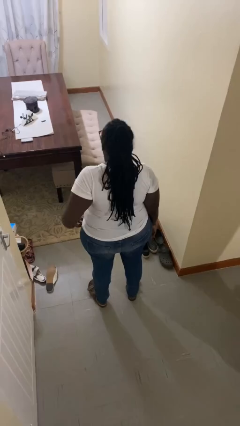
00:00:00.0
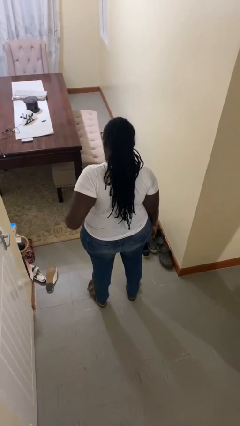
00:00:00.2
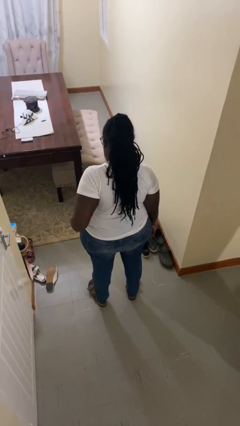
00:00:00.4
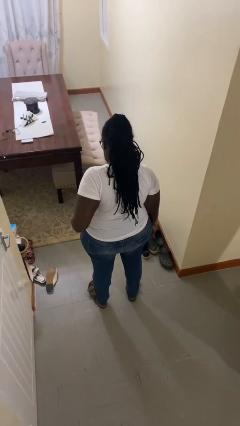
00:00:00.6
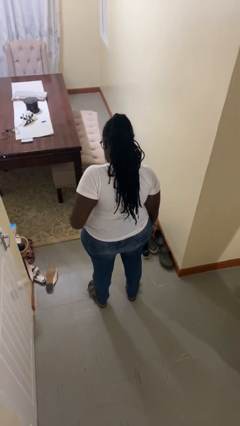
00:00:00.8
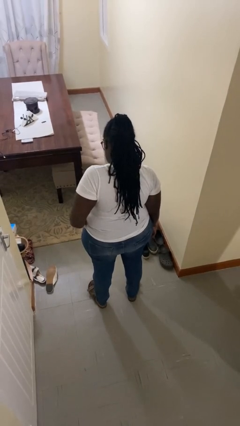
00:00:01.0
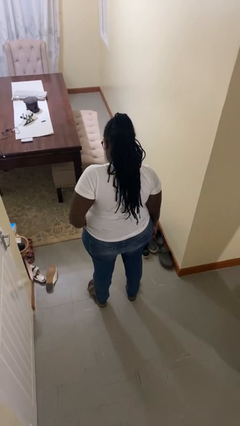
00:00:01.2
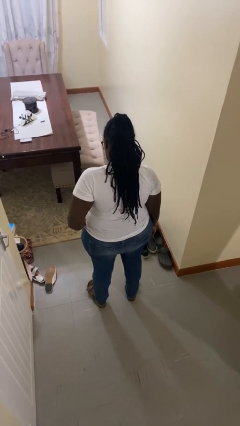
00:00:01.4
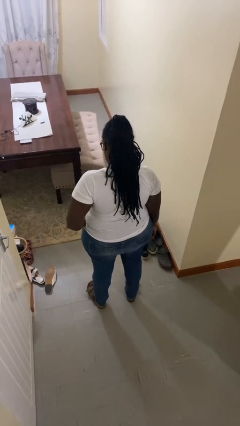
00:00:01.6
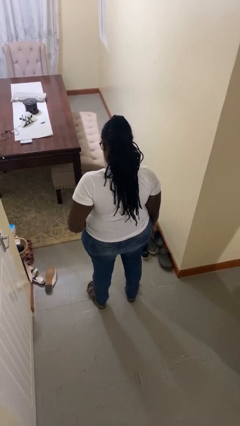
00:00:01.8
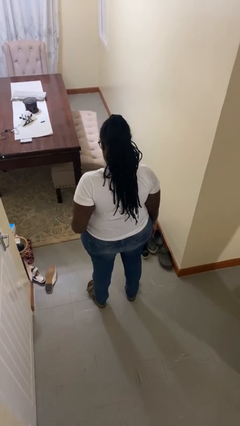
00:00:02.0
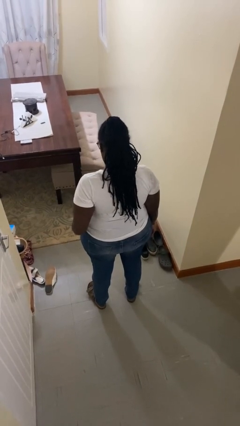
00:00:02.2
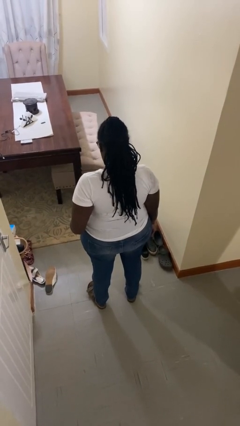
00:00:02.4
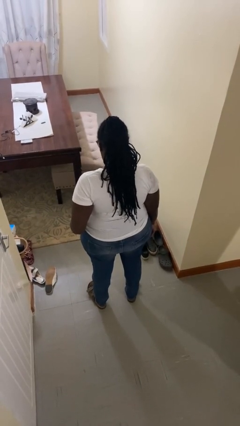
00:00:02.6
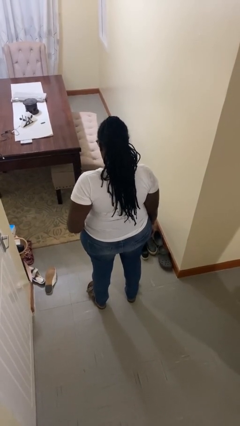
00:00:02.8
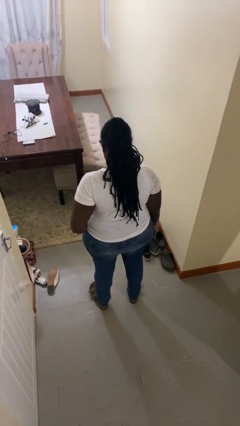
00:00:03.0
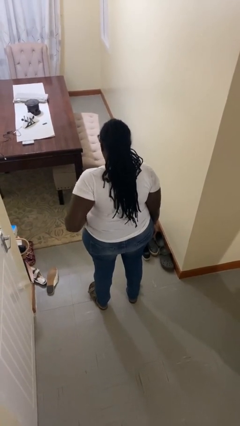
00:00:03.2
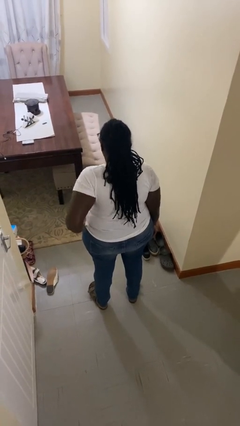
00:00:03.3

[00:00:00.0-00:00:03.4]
person puts hands in back pockets

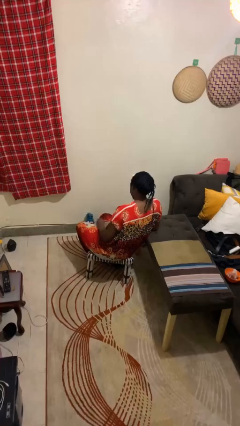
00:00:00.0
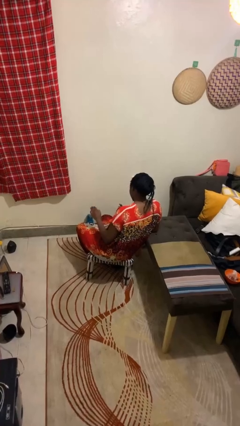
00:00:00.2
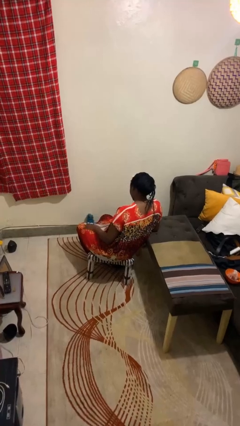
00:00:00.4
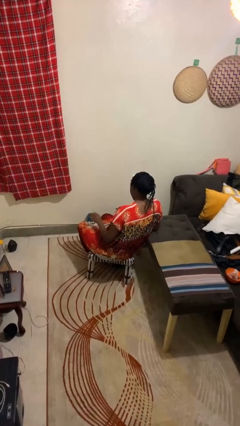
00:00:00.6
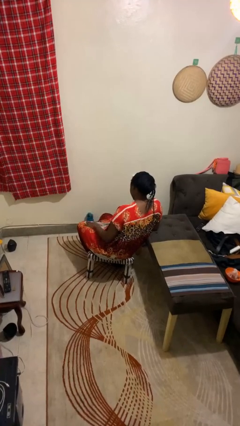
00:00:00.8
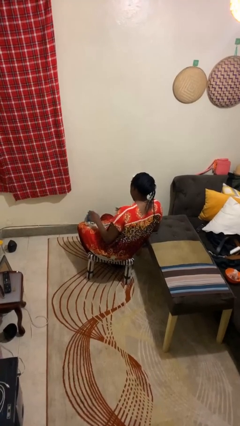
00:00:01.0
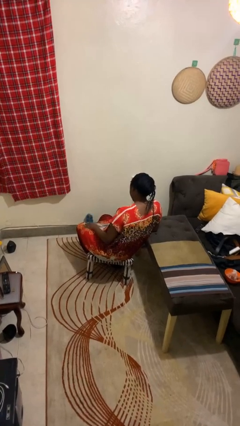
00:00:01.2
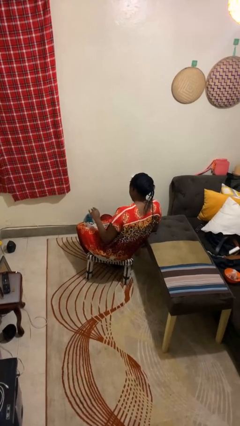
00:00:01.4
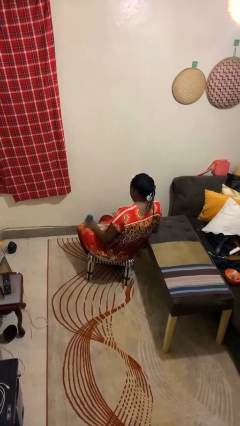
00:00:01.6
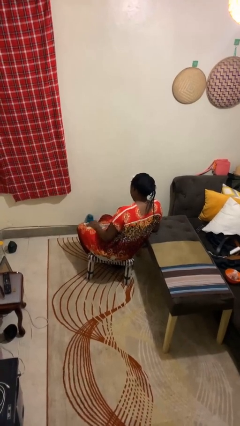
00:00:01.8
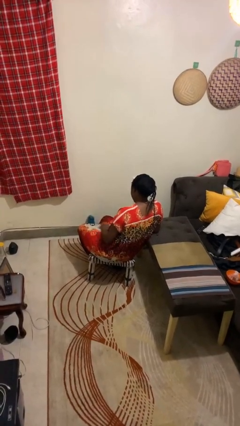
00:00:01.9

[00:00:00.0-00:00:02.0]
person slaps hands on thighs

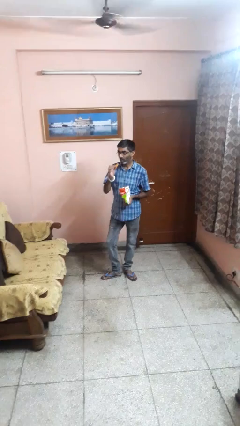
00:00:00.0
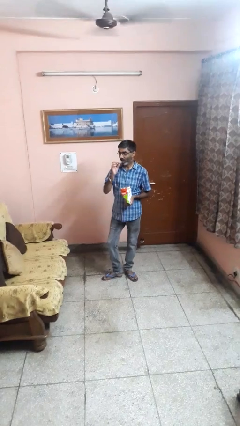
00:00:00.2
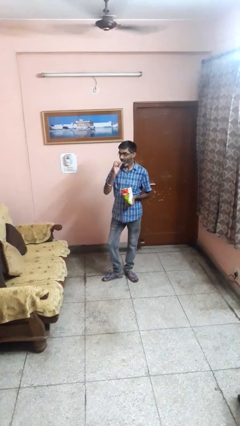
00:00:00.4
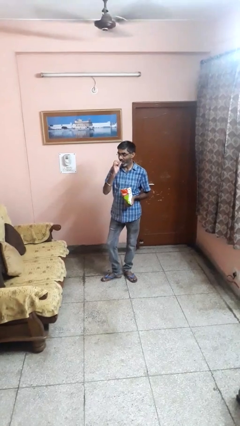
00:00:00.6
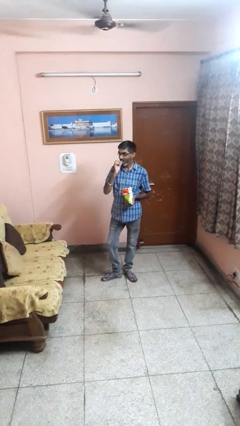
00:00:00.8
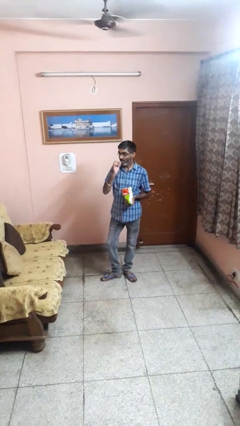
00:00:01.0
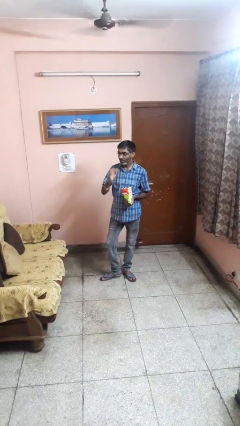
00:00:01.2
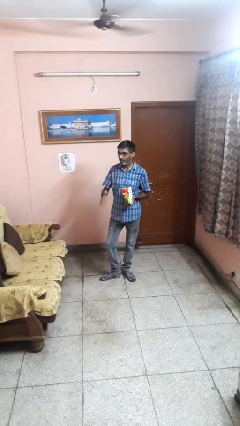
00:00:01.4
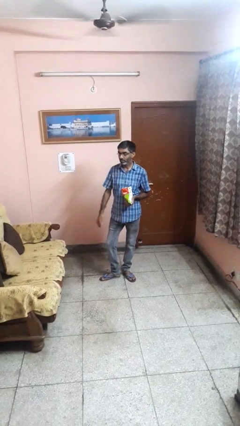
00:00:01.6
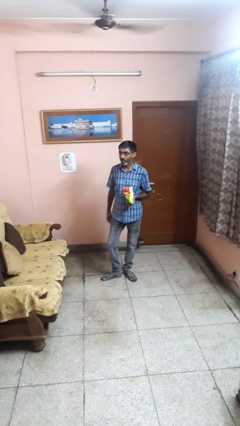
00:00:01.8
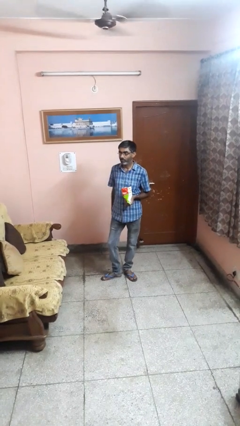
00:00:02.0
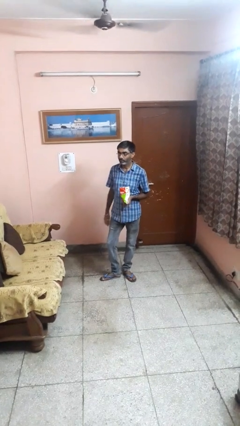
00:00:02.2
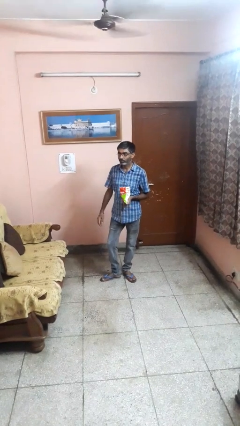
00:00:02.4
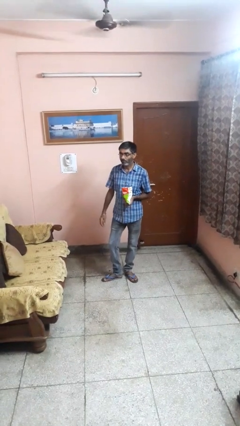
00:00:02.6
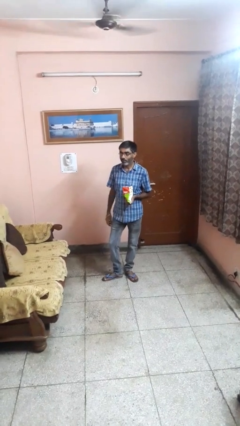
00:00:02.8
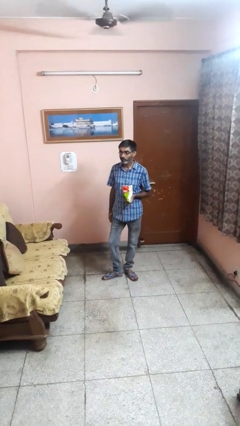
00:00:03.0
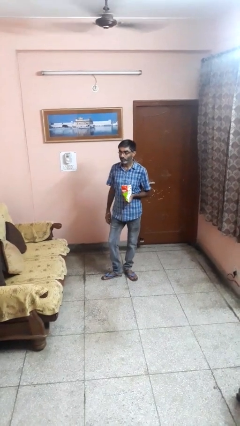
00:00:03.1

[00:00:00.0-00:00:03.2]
person eats snack from bag

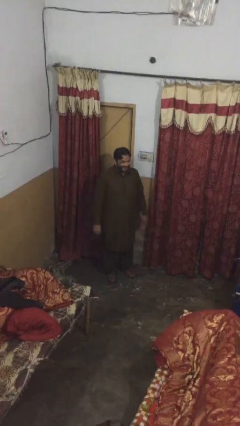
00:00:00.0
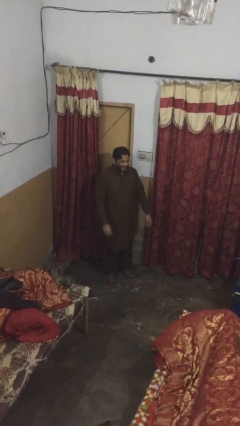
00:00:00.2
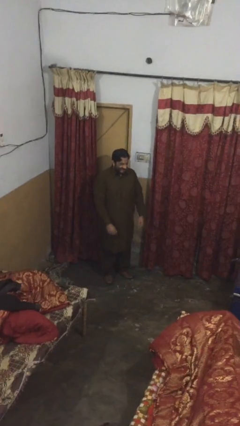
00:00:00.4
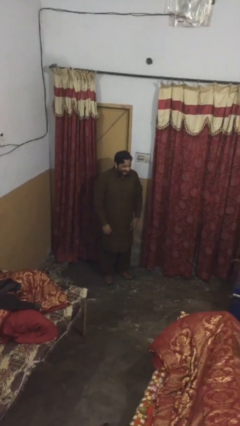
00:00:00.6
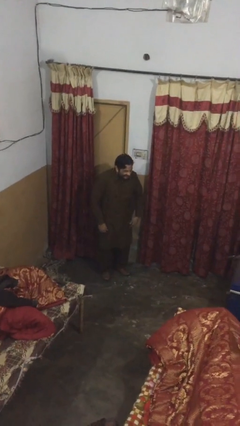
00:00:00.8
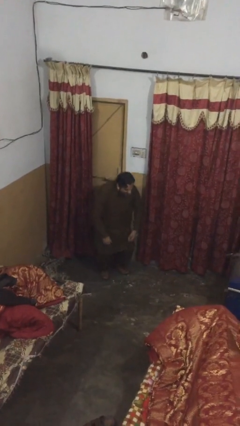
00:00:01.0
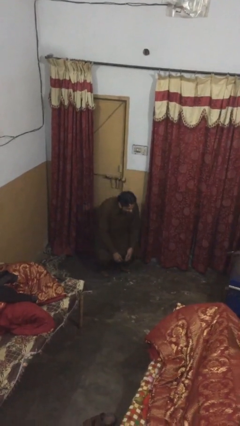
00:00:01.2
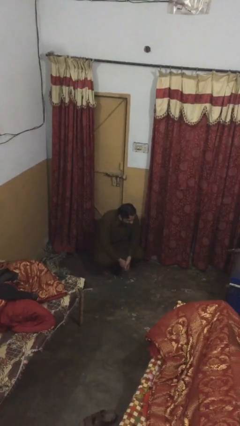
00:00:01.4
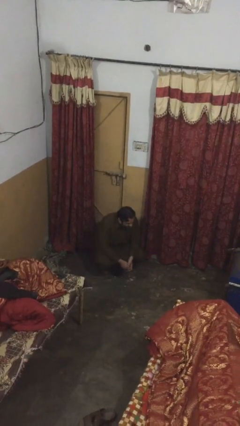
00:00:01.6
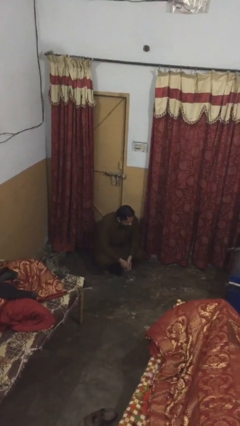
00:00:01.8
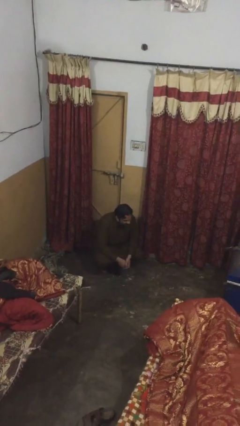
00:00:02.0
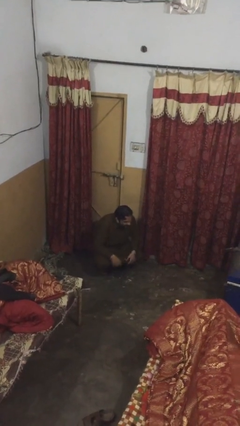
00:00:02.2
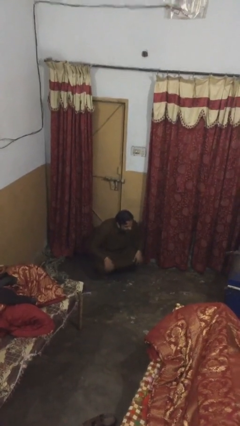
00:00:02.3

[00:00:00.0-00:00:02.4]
person sits down

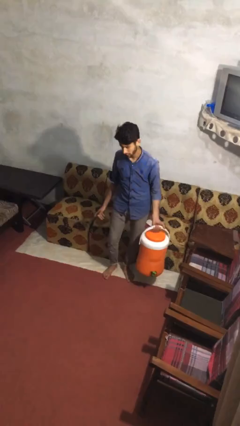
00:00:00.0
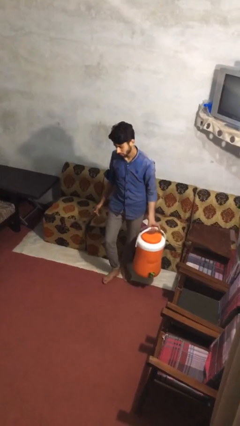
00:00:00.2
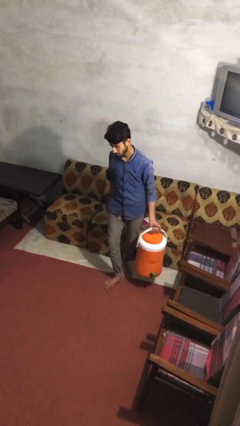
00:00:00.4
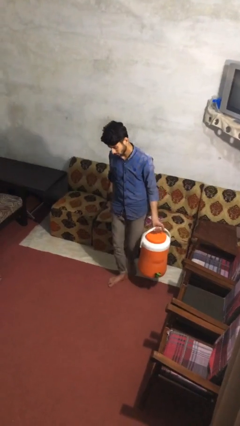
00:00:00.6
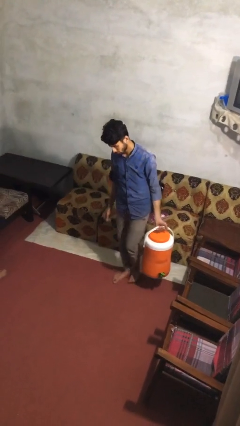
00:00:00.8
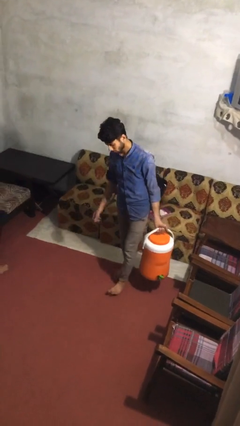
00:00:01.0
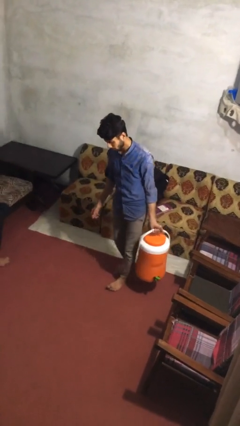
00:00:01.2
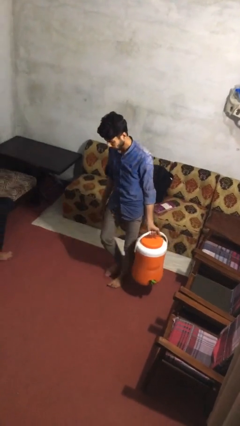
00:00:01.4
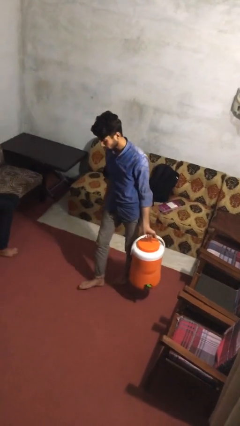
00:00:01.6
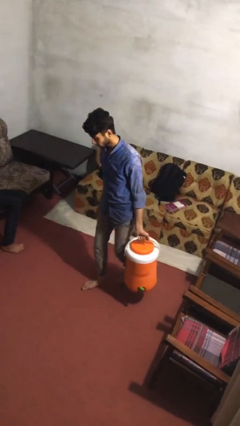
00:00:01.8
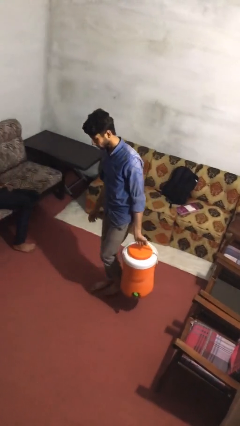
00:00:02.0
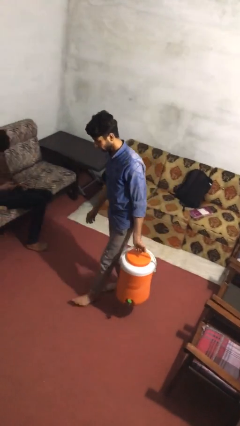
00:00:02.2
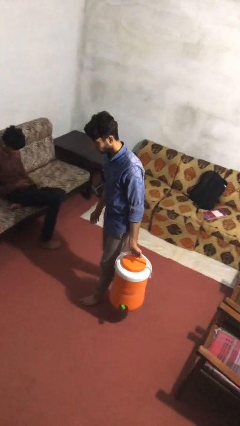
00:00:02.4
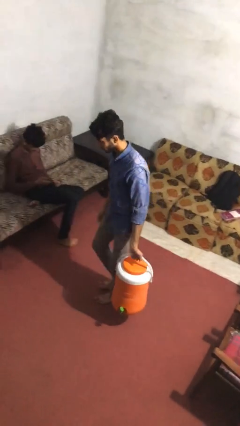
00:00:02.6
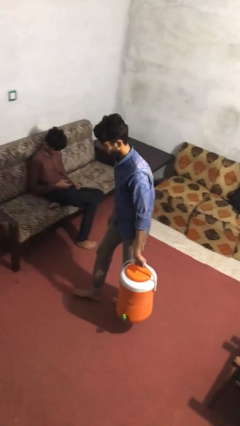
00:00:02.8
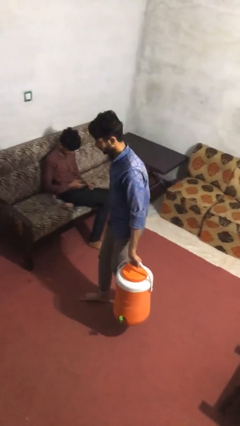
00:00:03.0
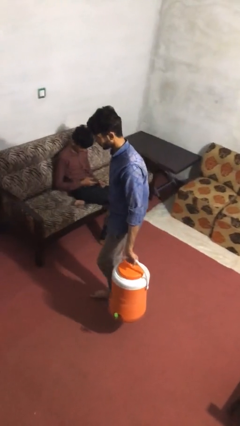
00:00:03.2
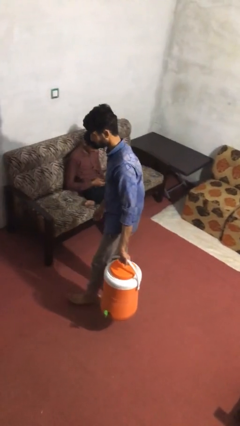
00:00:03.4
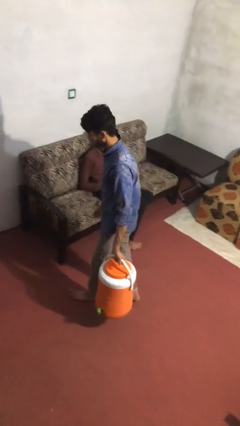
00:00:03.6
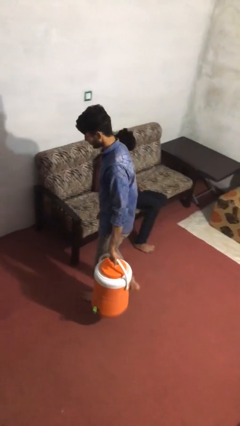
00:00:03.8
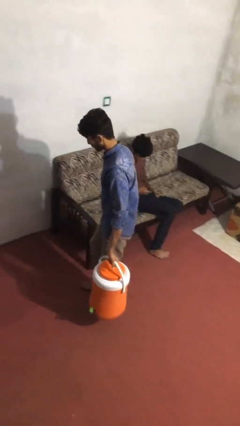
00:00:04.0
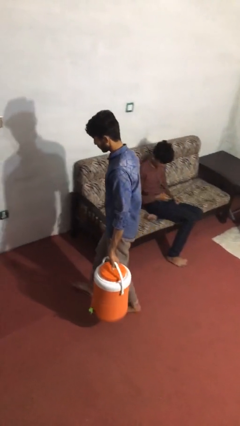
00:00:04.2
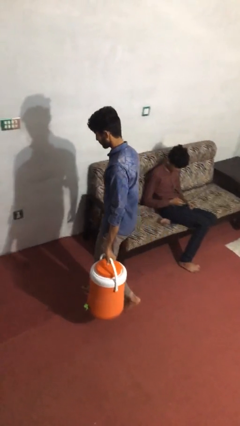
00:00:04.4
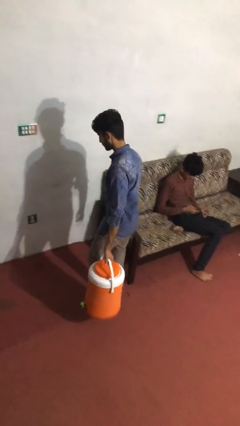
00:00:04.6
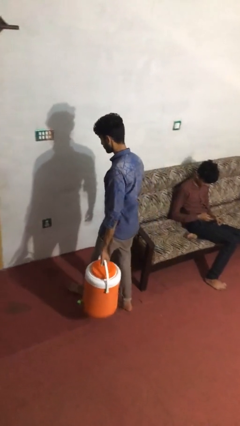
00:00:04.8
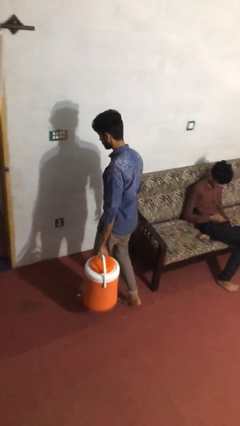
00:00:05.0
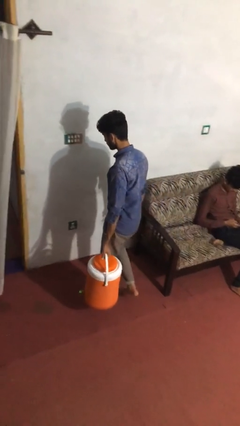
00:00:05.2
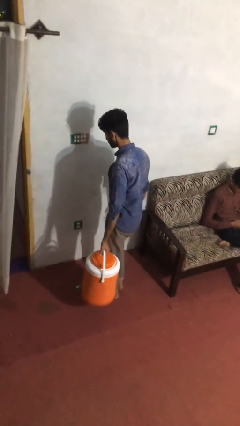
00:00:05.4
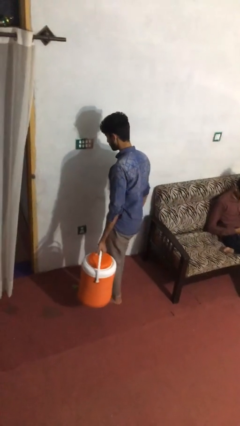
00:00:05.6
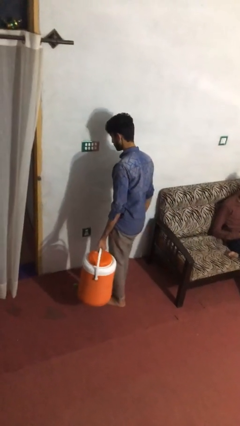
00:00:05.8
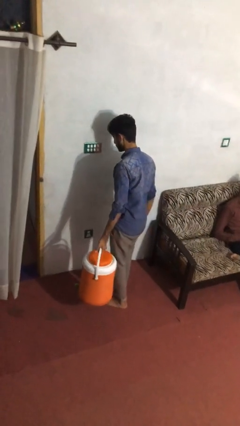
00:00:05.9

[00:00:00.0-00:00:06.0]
person carries heavy object

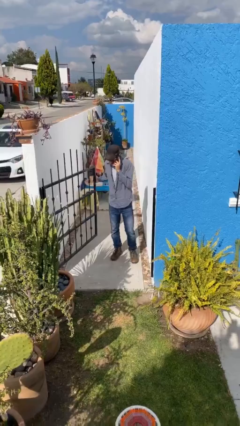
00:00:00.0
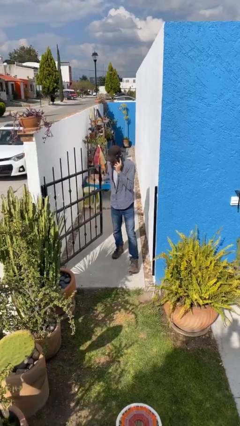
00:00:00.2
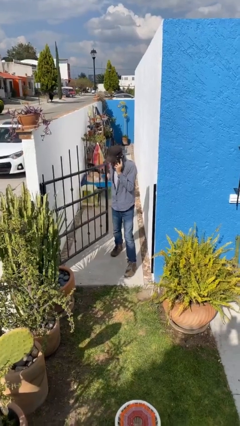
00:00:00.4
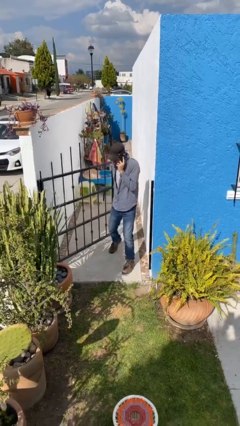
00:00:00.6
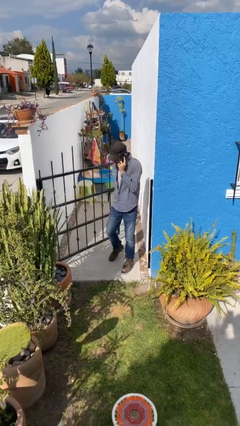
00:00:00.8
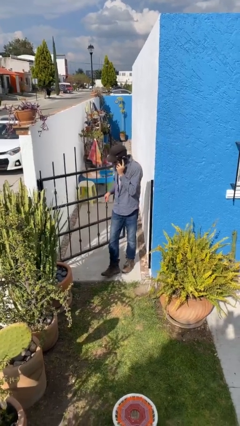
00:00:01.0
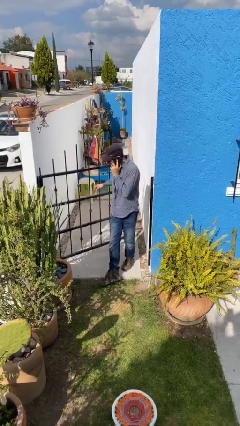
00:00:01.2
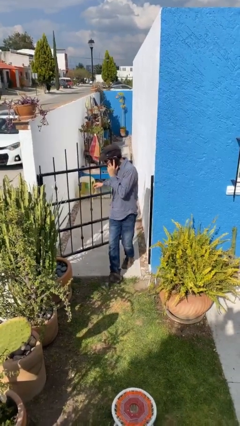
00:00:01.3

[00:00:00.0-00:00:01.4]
person enters scene through structure
